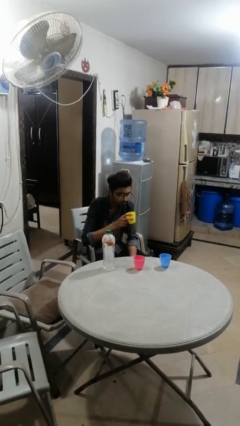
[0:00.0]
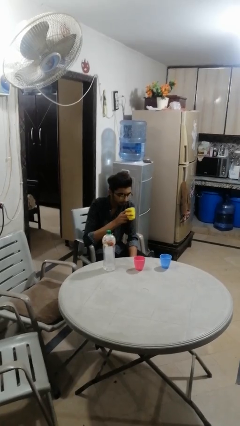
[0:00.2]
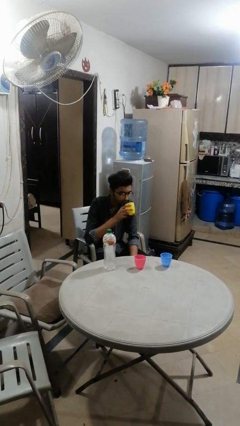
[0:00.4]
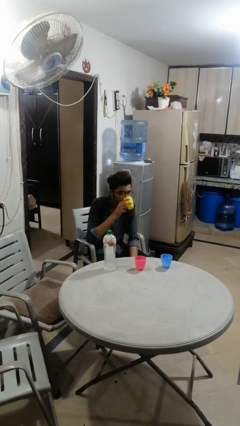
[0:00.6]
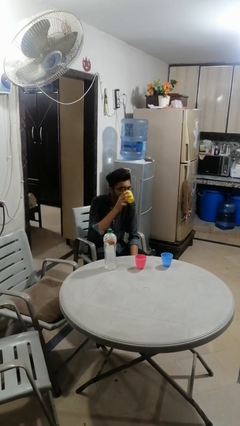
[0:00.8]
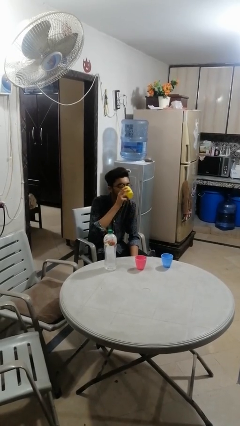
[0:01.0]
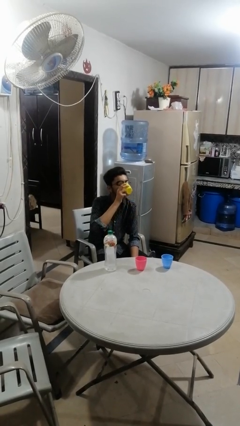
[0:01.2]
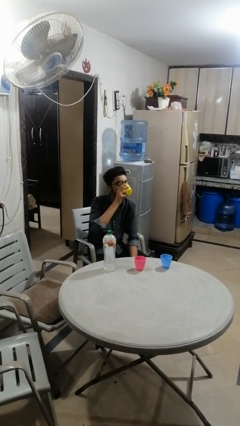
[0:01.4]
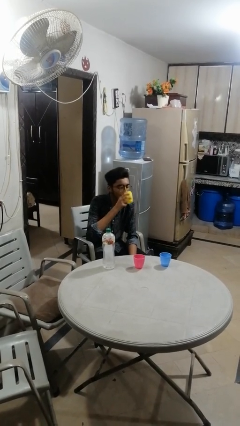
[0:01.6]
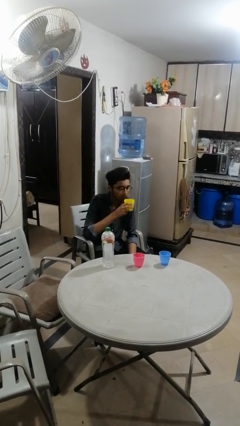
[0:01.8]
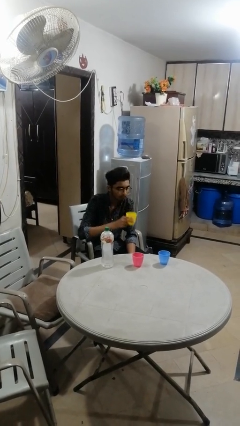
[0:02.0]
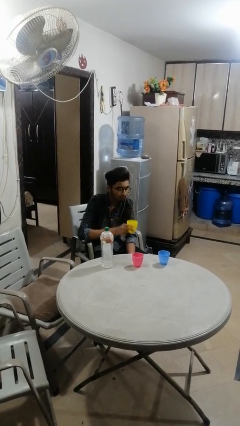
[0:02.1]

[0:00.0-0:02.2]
person drinks from shotglass

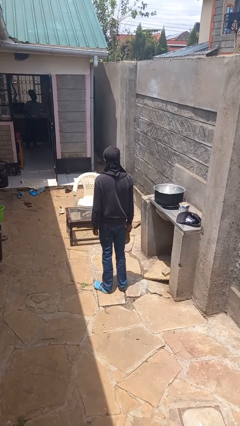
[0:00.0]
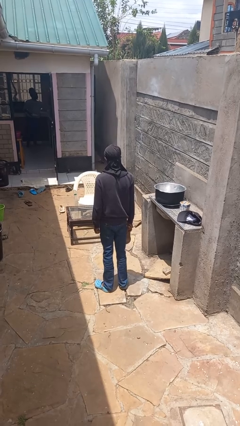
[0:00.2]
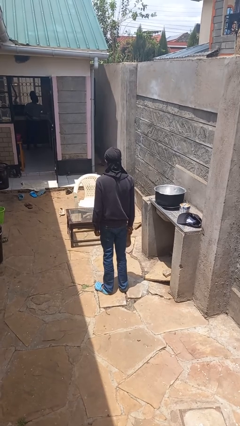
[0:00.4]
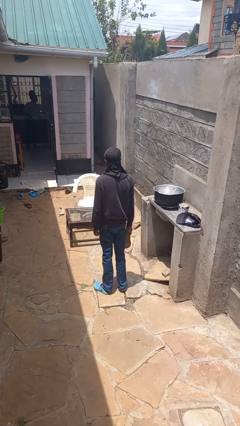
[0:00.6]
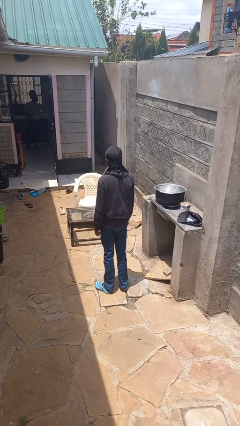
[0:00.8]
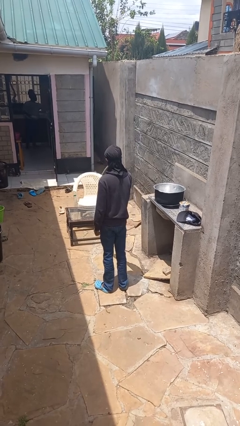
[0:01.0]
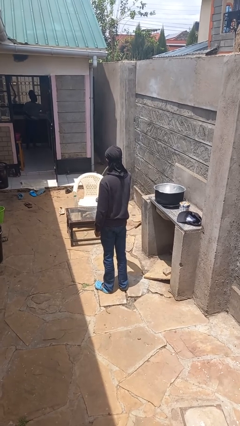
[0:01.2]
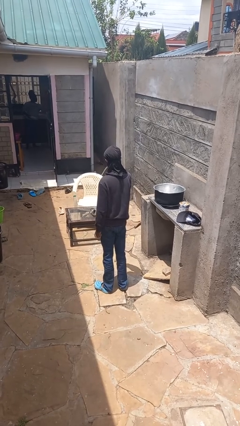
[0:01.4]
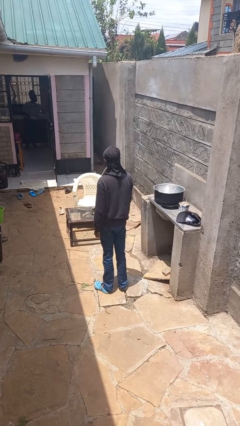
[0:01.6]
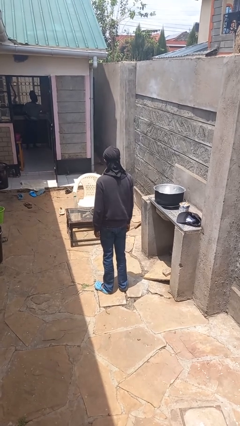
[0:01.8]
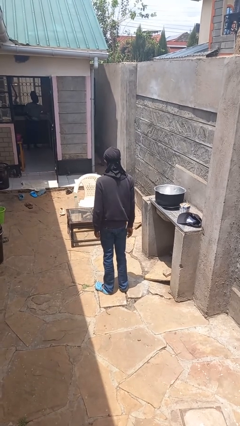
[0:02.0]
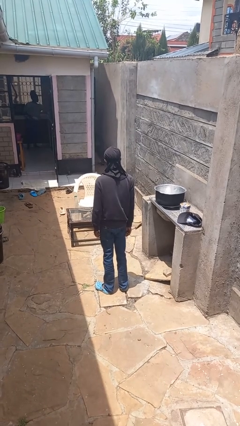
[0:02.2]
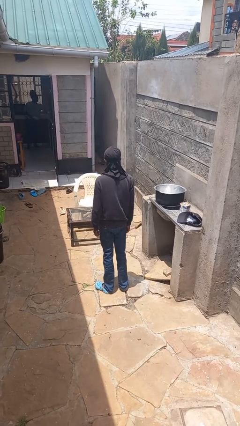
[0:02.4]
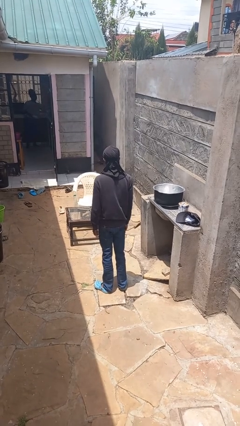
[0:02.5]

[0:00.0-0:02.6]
person throws object on table

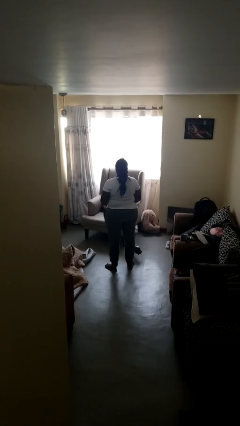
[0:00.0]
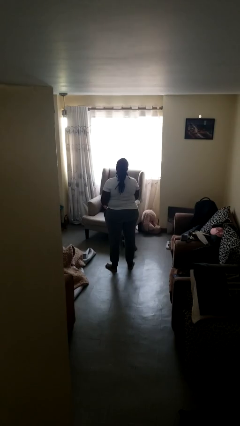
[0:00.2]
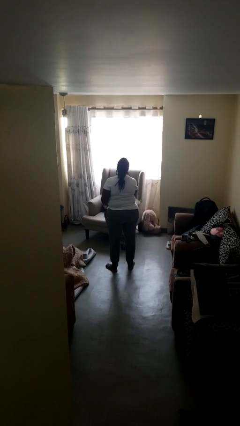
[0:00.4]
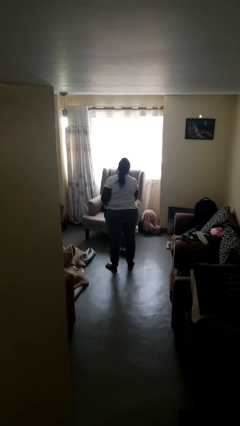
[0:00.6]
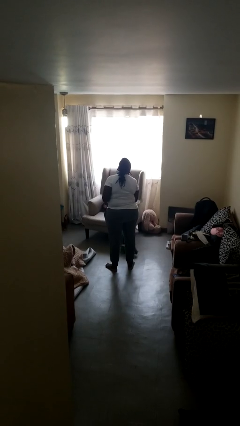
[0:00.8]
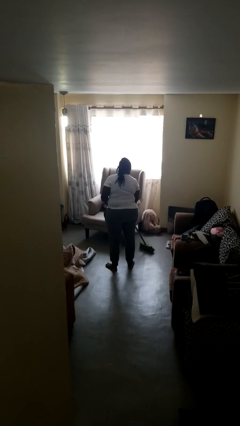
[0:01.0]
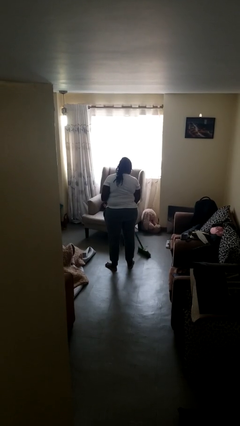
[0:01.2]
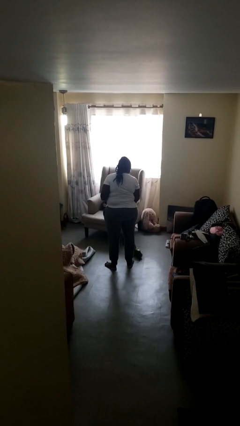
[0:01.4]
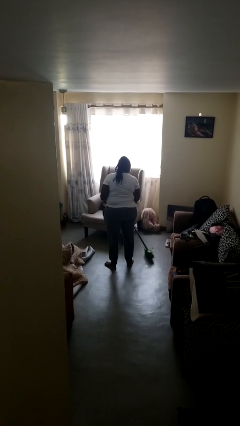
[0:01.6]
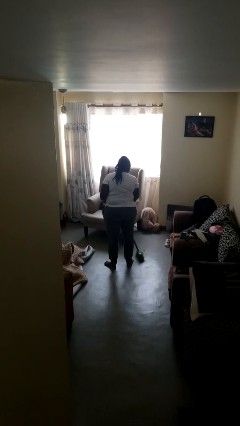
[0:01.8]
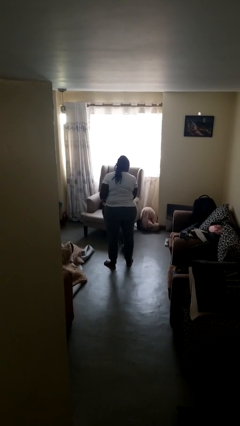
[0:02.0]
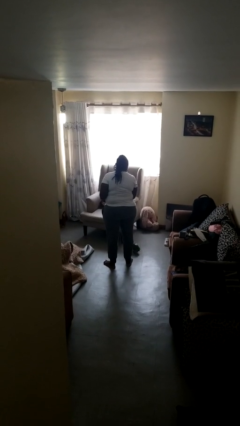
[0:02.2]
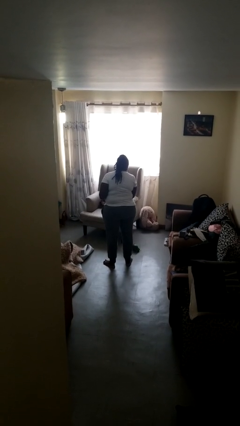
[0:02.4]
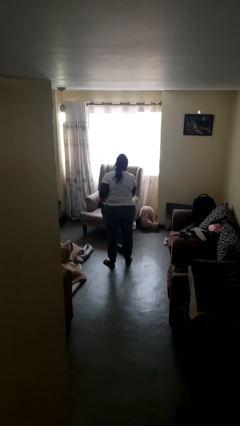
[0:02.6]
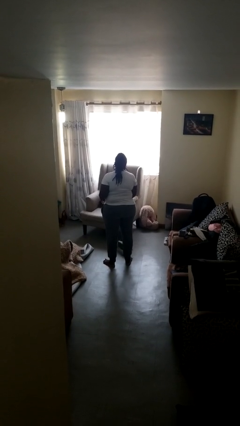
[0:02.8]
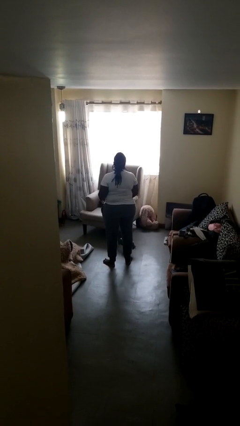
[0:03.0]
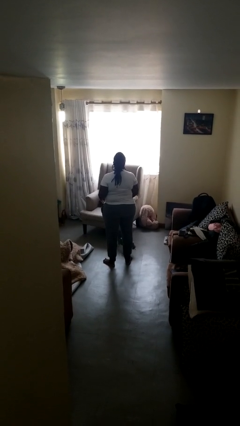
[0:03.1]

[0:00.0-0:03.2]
person sweeps floor

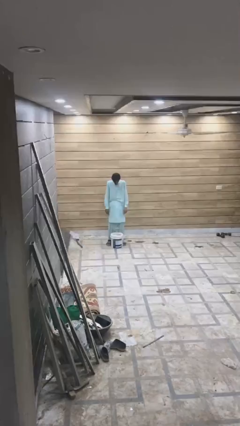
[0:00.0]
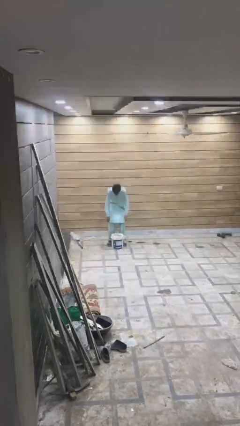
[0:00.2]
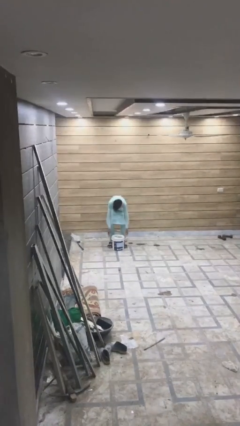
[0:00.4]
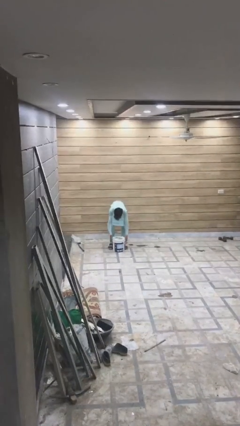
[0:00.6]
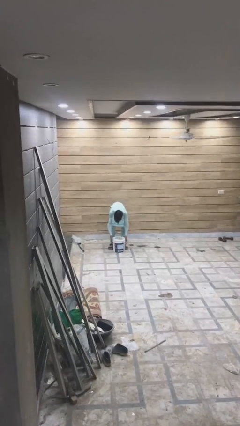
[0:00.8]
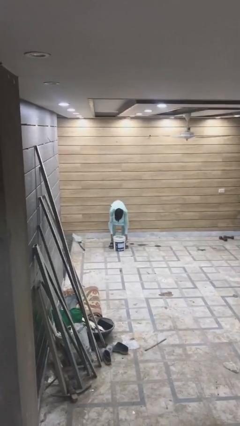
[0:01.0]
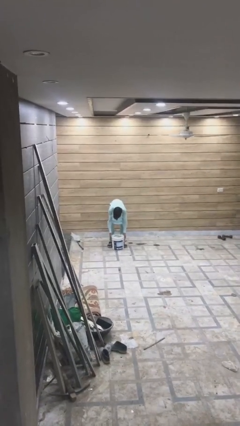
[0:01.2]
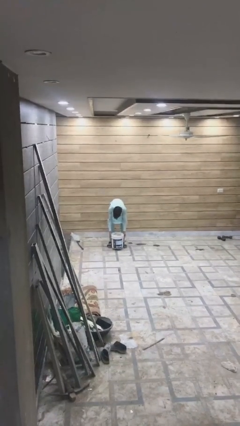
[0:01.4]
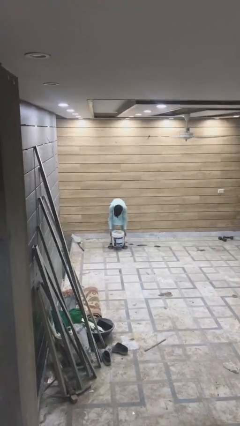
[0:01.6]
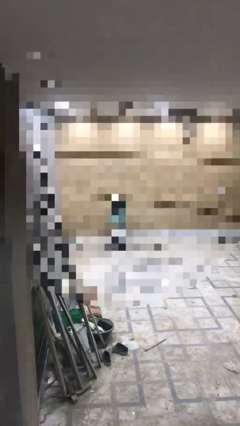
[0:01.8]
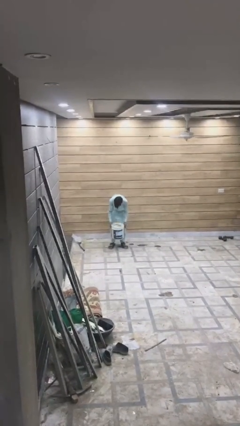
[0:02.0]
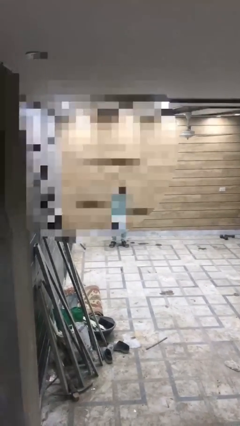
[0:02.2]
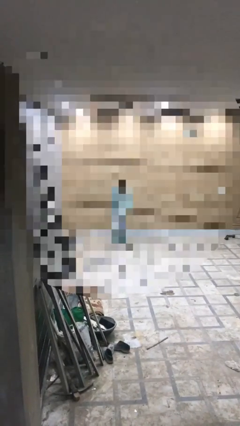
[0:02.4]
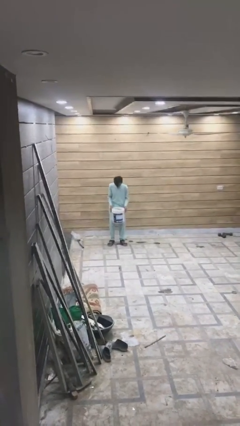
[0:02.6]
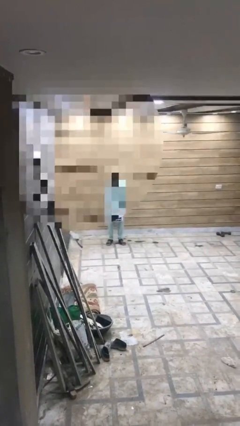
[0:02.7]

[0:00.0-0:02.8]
person picks up object from floor

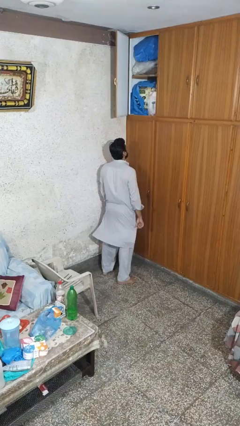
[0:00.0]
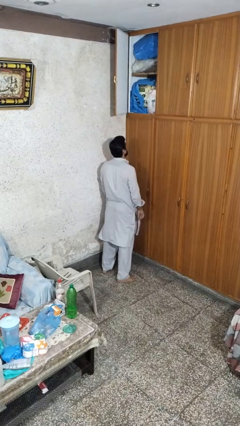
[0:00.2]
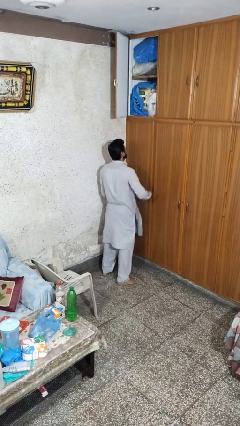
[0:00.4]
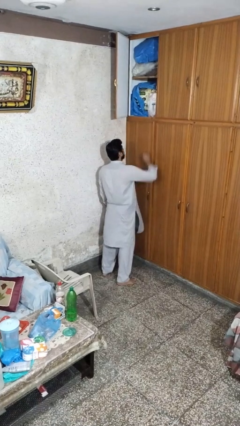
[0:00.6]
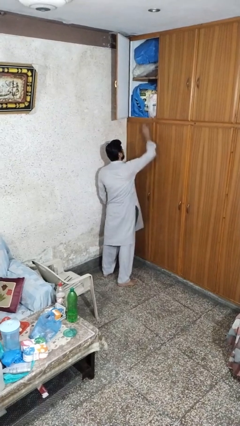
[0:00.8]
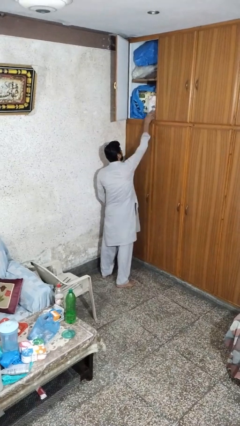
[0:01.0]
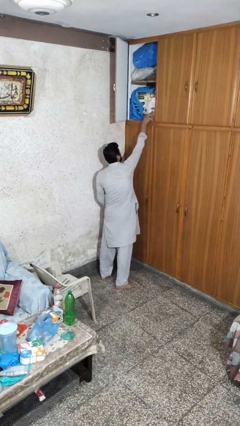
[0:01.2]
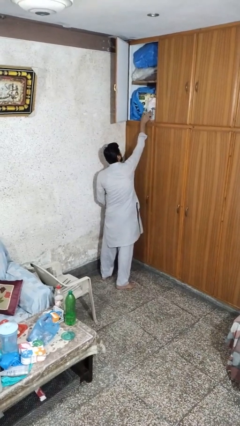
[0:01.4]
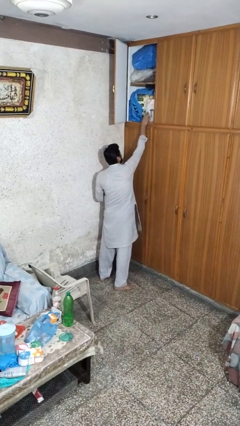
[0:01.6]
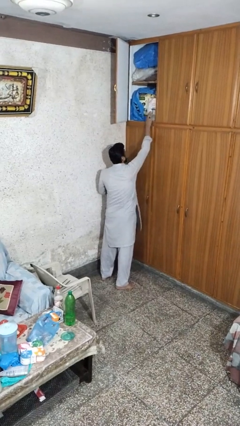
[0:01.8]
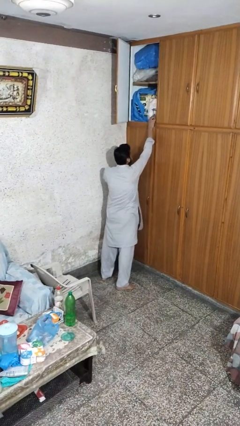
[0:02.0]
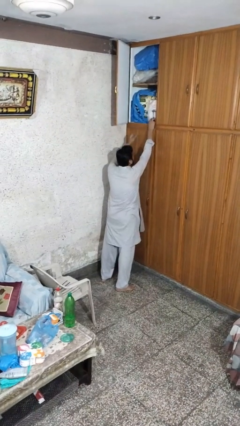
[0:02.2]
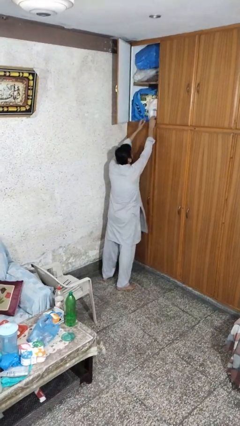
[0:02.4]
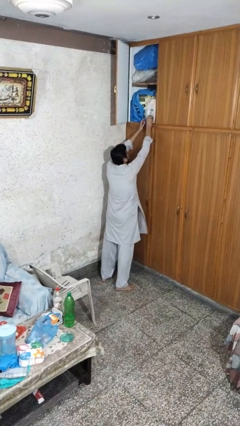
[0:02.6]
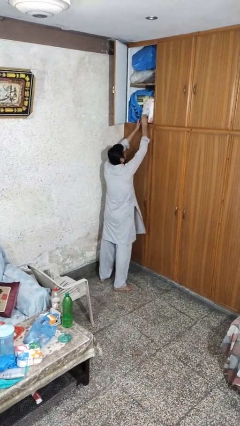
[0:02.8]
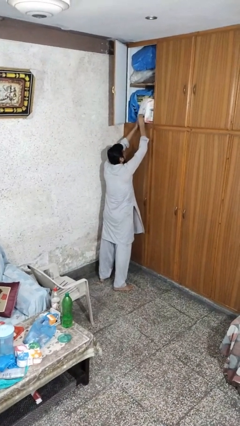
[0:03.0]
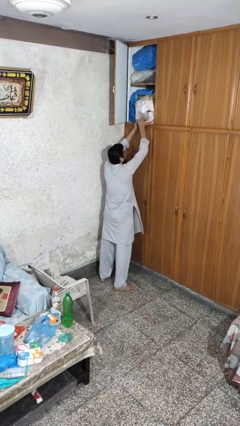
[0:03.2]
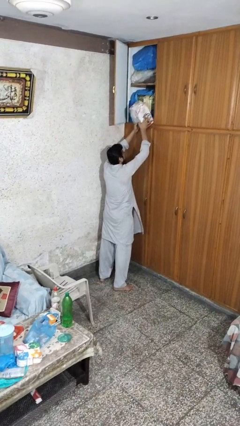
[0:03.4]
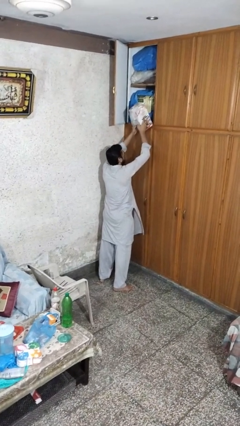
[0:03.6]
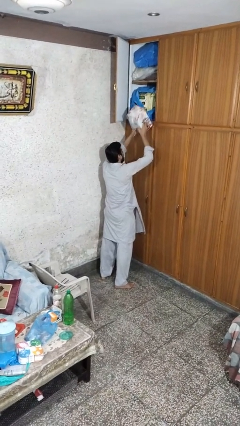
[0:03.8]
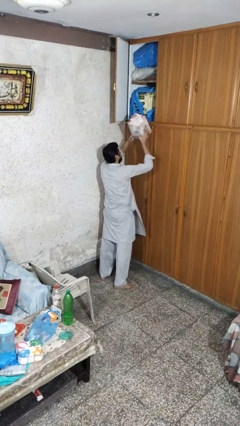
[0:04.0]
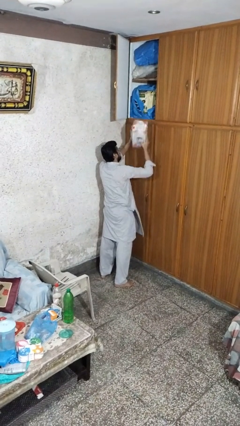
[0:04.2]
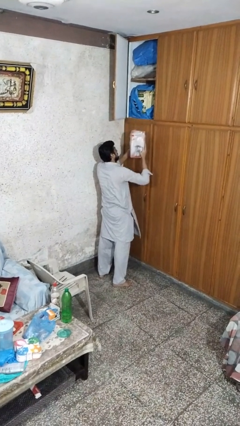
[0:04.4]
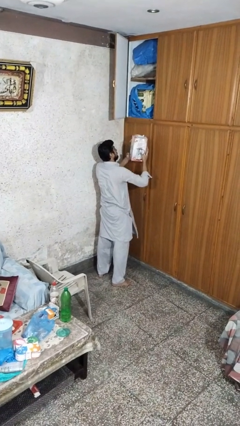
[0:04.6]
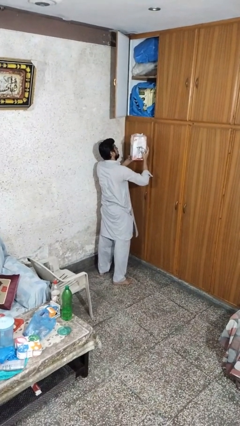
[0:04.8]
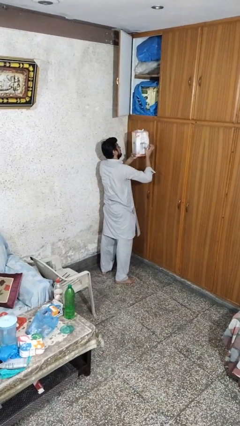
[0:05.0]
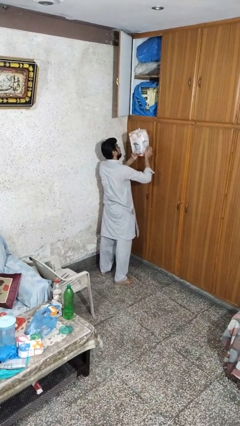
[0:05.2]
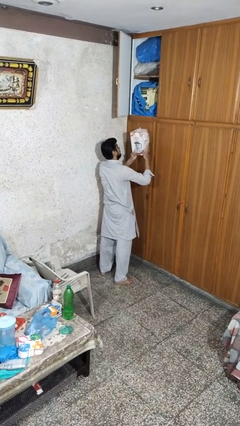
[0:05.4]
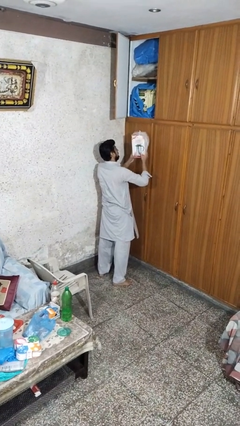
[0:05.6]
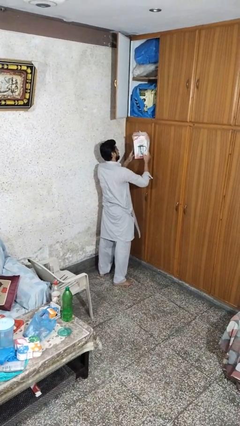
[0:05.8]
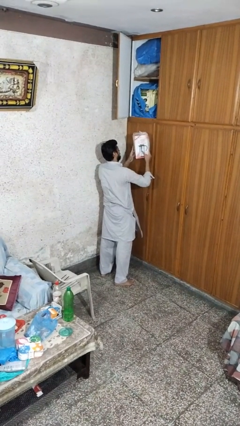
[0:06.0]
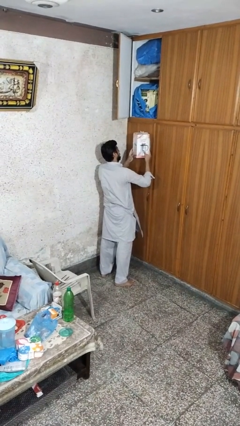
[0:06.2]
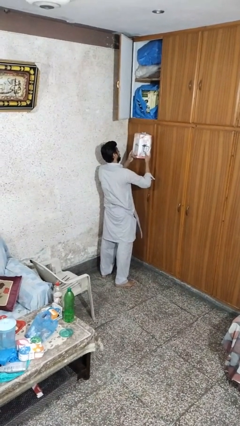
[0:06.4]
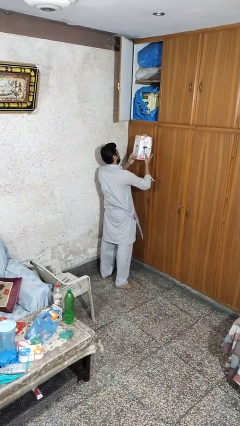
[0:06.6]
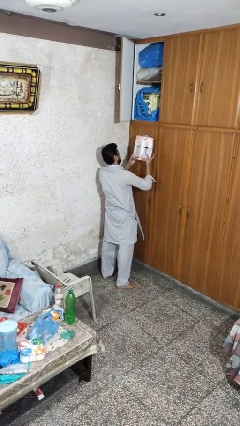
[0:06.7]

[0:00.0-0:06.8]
person picks up object from countertop
